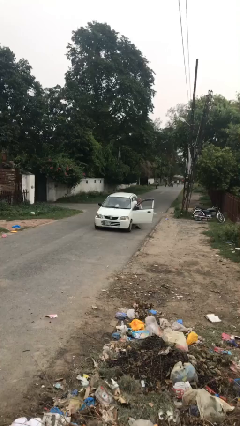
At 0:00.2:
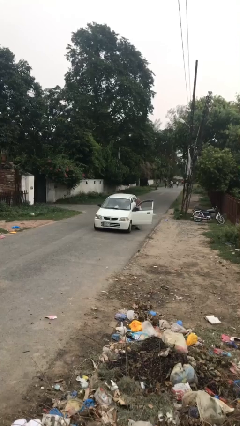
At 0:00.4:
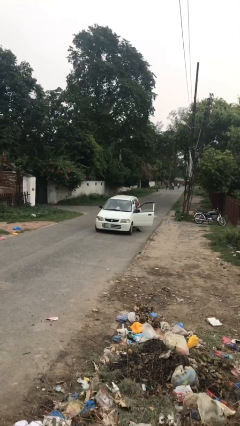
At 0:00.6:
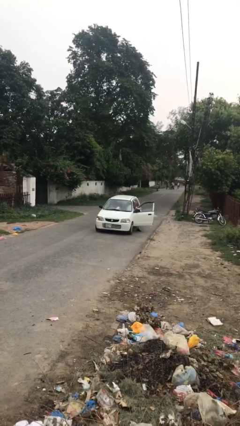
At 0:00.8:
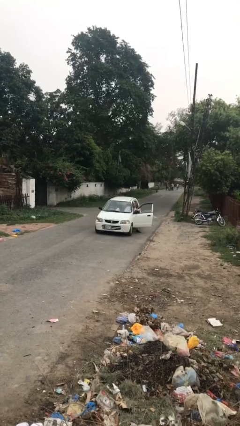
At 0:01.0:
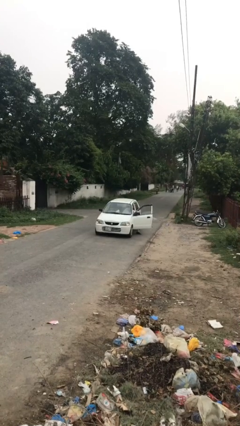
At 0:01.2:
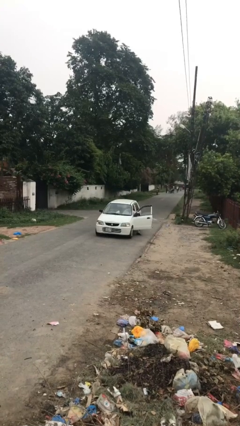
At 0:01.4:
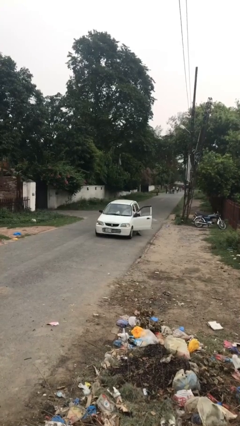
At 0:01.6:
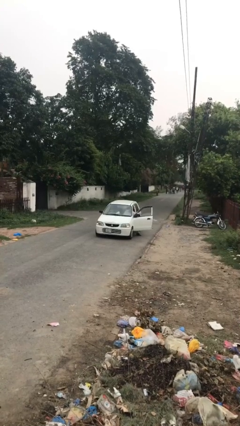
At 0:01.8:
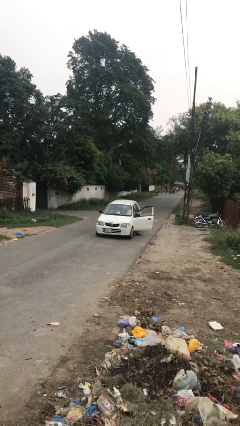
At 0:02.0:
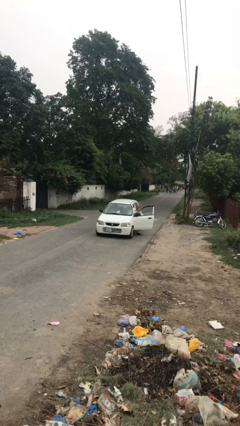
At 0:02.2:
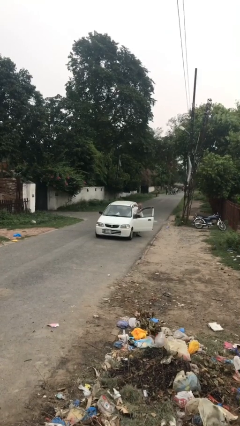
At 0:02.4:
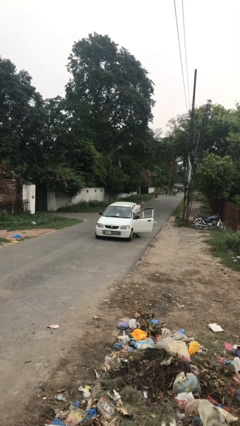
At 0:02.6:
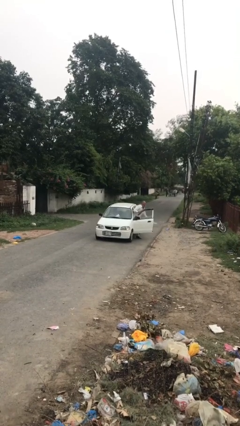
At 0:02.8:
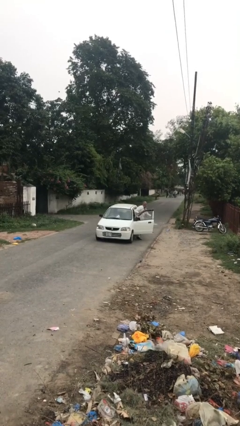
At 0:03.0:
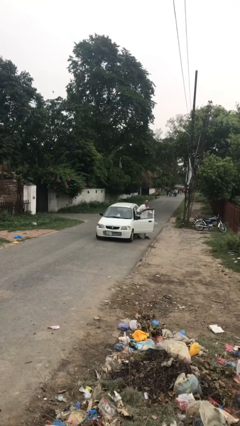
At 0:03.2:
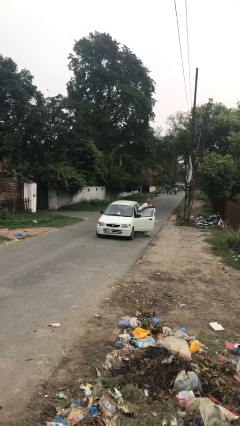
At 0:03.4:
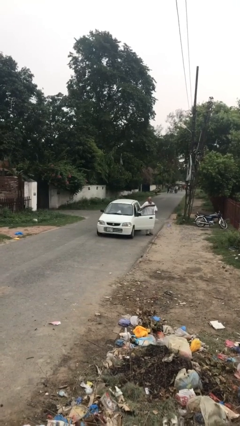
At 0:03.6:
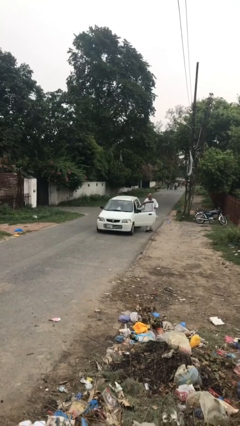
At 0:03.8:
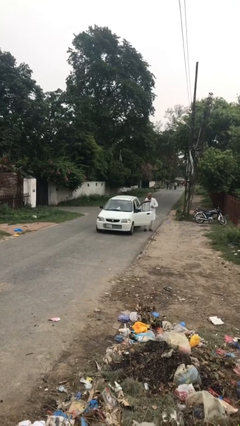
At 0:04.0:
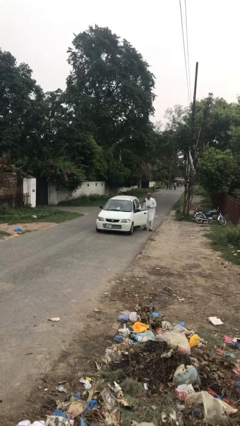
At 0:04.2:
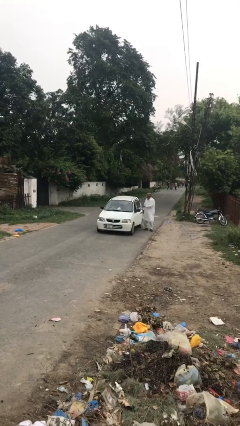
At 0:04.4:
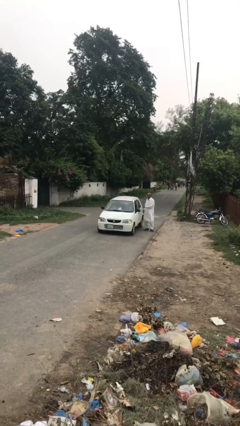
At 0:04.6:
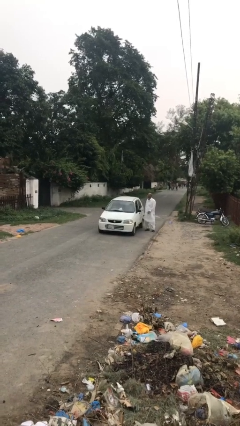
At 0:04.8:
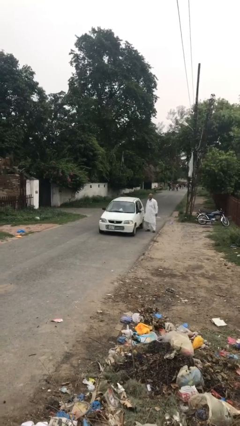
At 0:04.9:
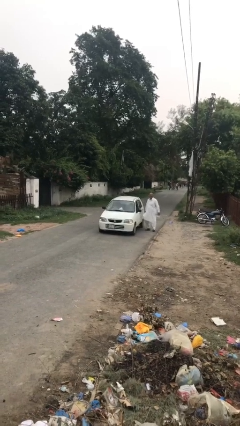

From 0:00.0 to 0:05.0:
car drops off person

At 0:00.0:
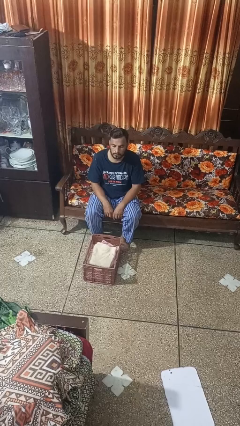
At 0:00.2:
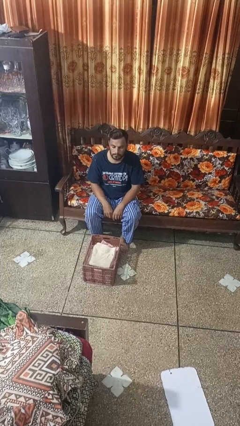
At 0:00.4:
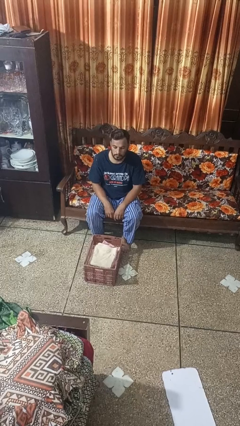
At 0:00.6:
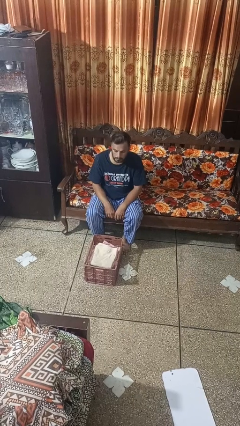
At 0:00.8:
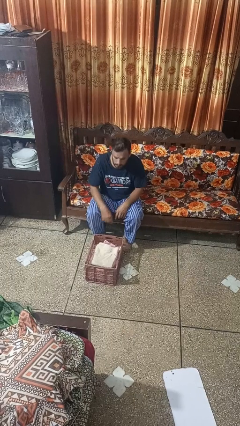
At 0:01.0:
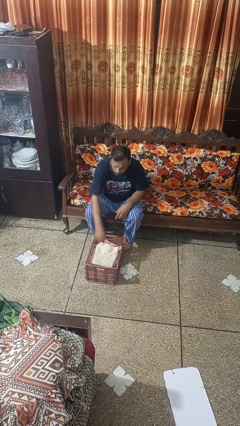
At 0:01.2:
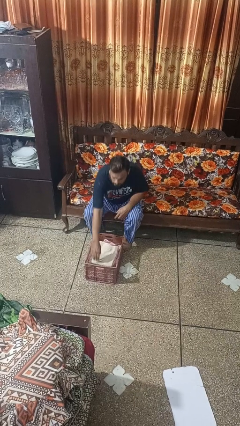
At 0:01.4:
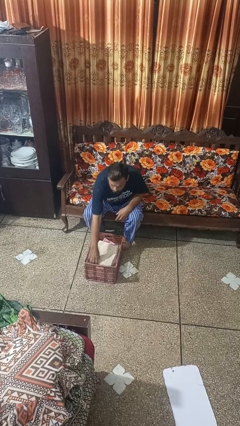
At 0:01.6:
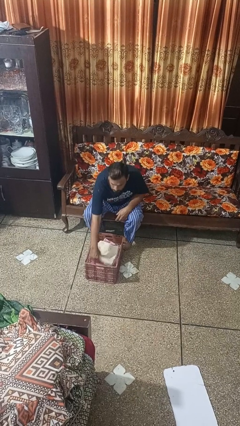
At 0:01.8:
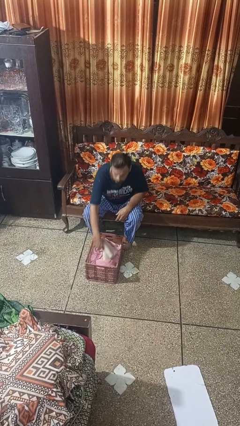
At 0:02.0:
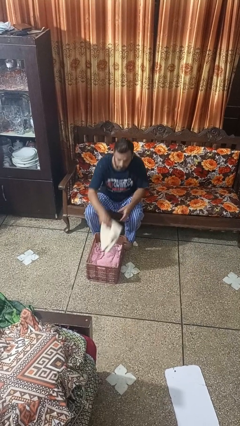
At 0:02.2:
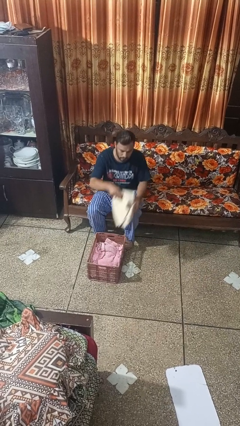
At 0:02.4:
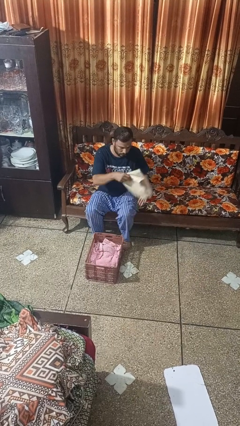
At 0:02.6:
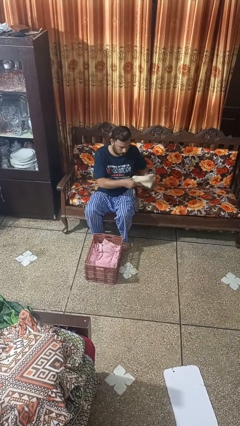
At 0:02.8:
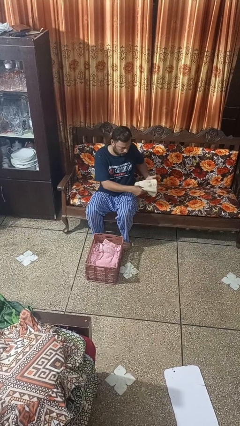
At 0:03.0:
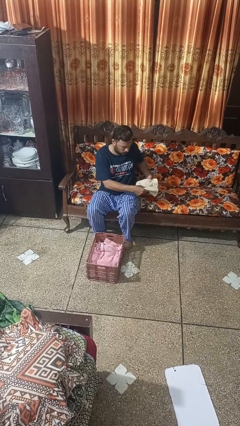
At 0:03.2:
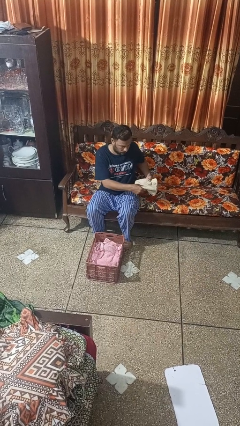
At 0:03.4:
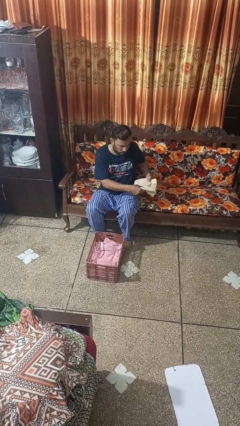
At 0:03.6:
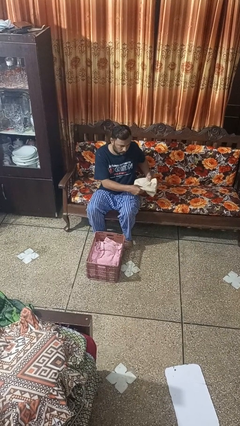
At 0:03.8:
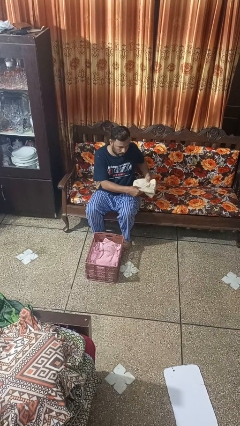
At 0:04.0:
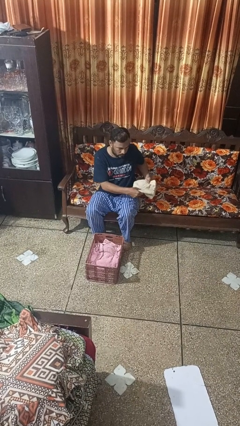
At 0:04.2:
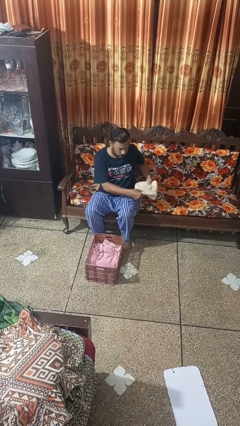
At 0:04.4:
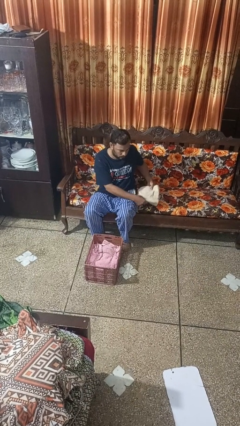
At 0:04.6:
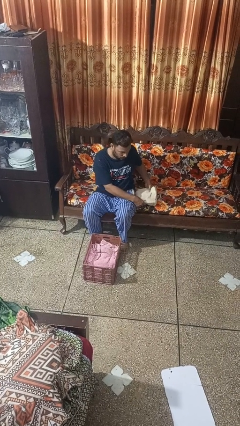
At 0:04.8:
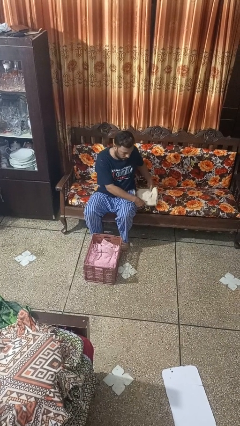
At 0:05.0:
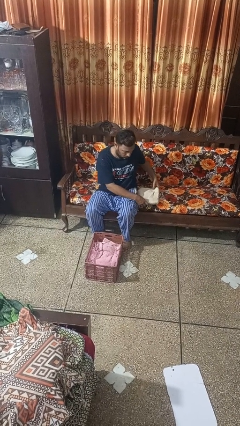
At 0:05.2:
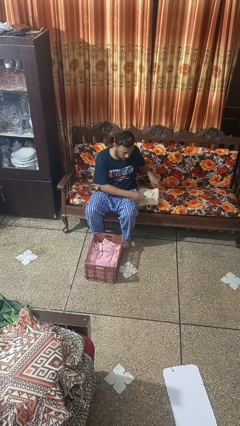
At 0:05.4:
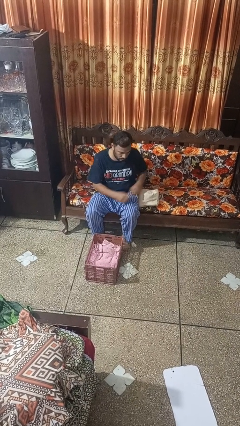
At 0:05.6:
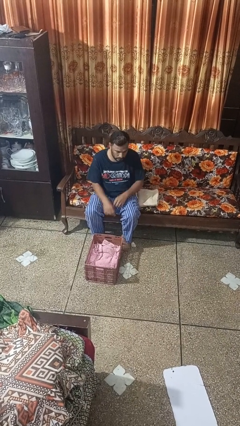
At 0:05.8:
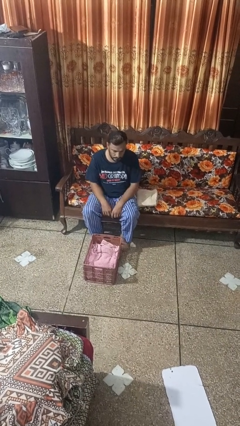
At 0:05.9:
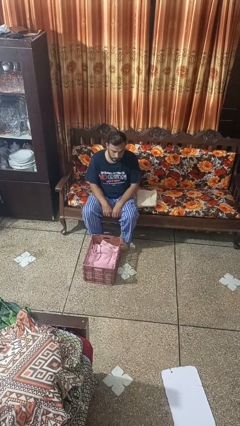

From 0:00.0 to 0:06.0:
person takes object from basket

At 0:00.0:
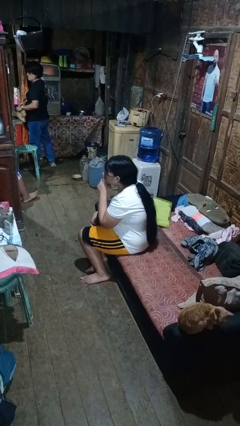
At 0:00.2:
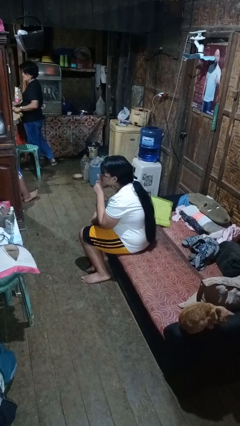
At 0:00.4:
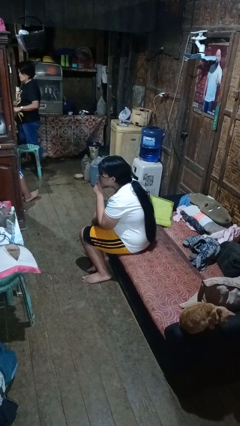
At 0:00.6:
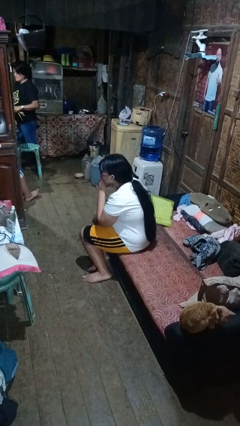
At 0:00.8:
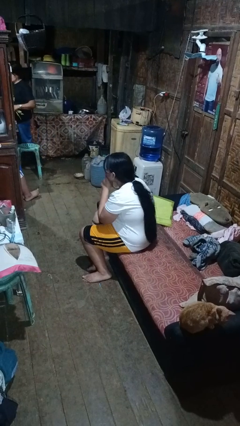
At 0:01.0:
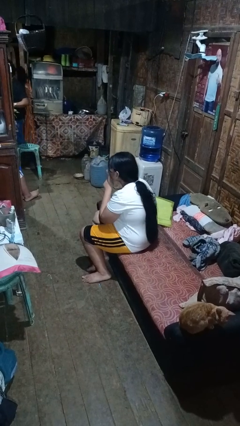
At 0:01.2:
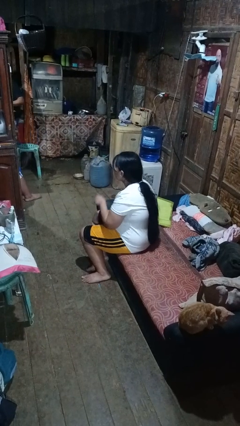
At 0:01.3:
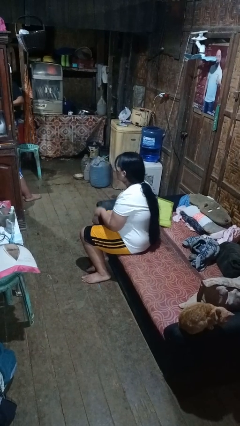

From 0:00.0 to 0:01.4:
person gestures be quiet

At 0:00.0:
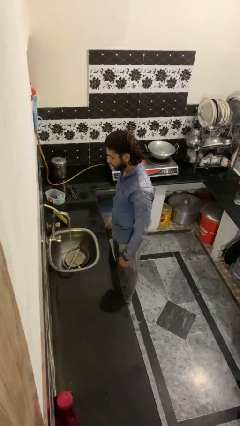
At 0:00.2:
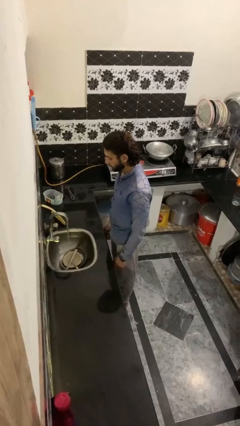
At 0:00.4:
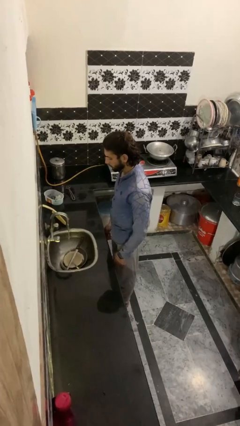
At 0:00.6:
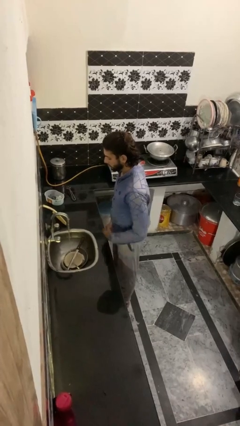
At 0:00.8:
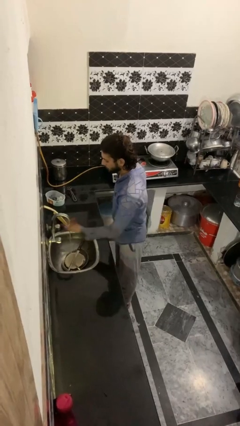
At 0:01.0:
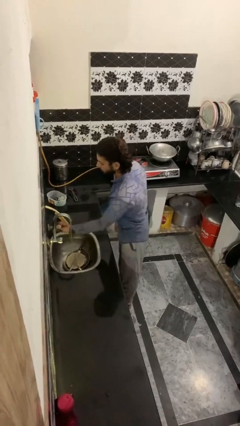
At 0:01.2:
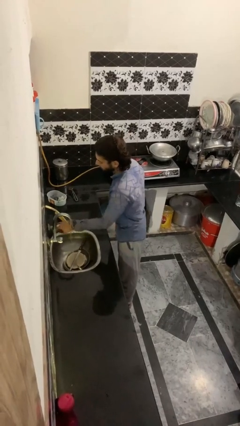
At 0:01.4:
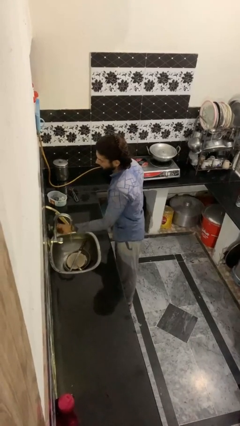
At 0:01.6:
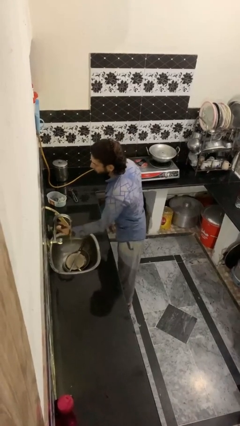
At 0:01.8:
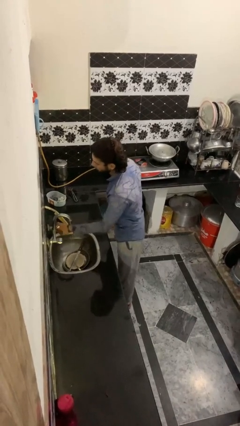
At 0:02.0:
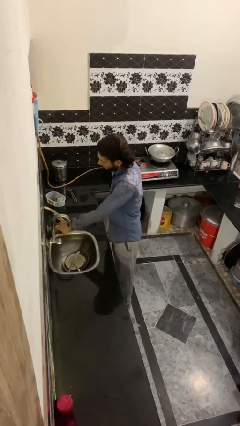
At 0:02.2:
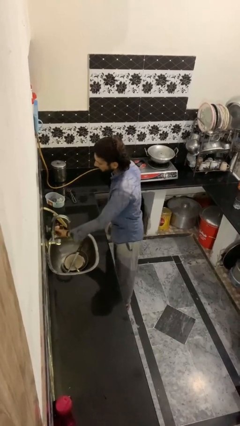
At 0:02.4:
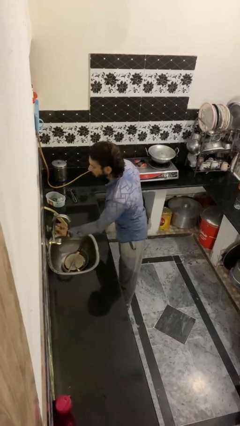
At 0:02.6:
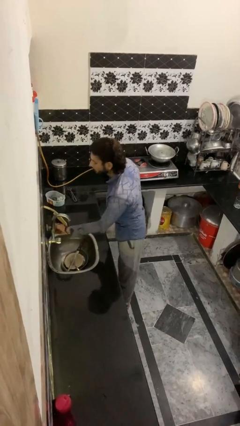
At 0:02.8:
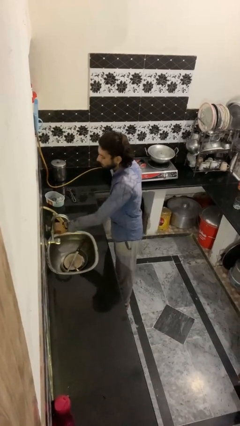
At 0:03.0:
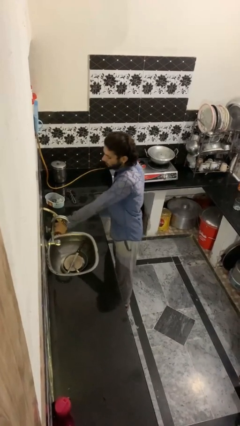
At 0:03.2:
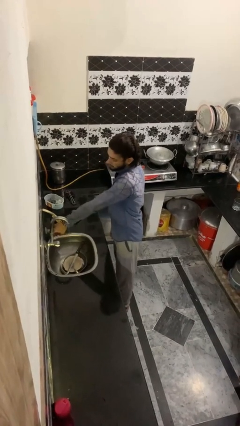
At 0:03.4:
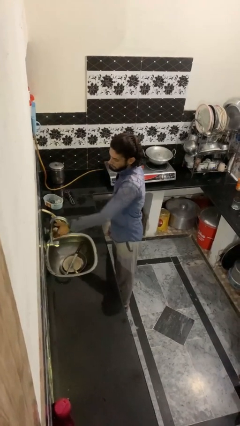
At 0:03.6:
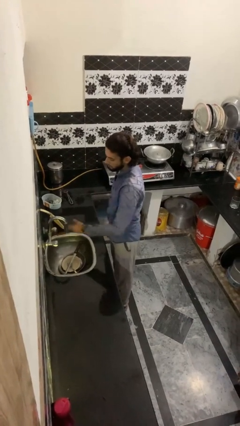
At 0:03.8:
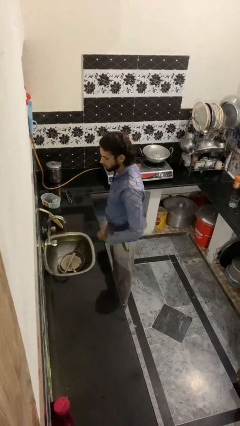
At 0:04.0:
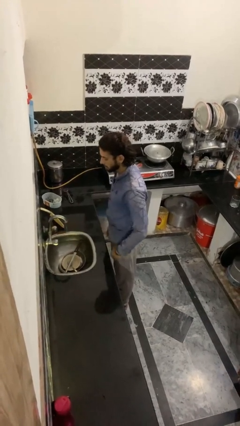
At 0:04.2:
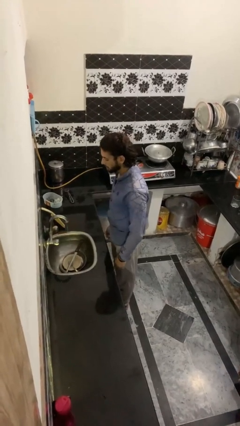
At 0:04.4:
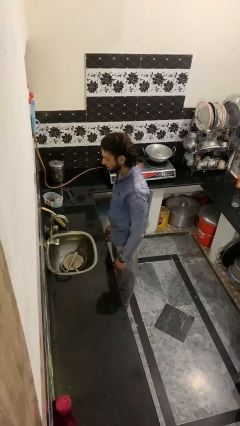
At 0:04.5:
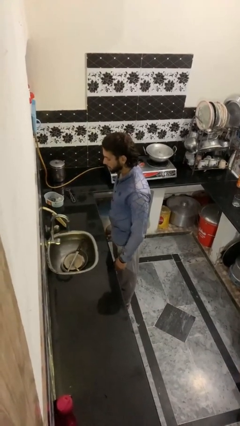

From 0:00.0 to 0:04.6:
person turns off faucet

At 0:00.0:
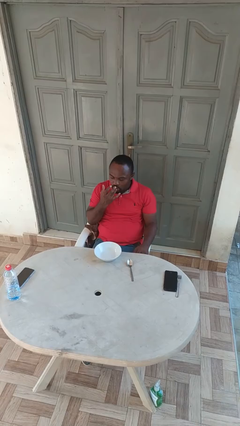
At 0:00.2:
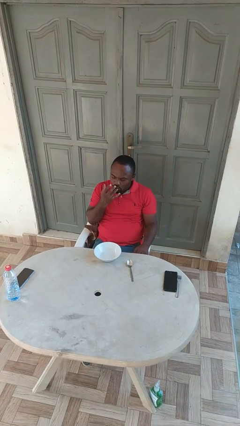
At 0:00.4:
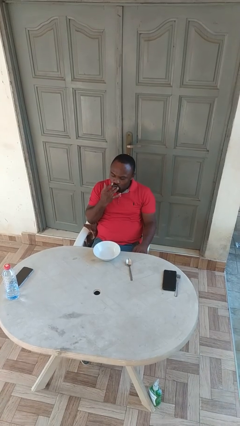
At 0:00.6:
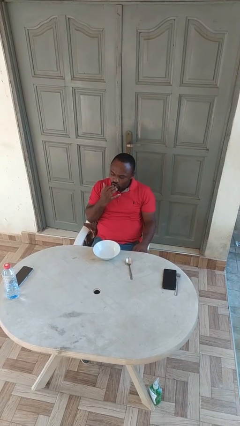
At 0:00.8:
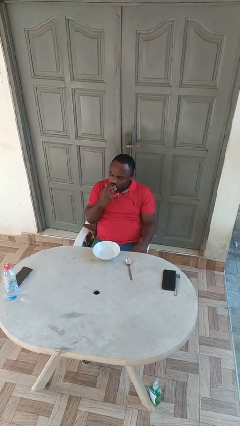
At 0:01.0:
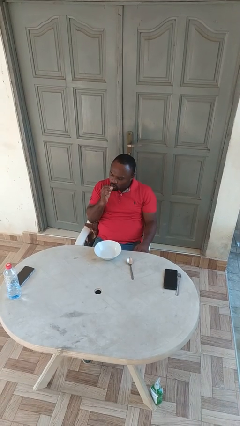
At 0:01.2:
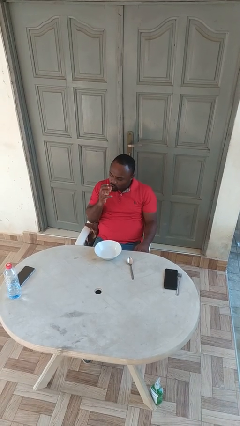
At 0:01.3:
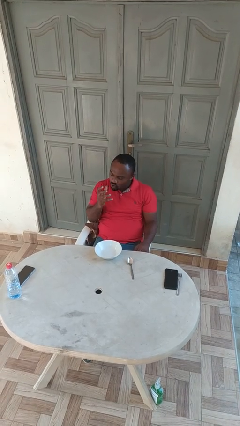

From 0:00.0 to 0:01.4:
person licks fingers
